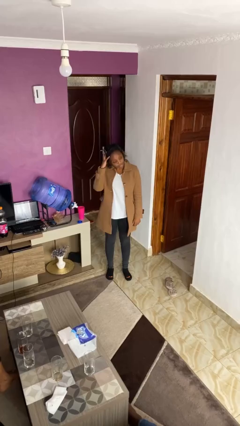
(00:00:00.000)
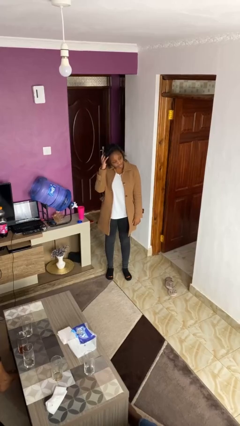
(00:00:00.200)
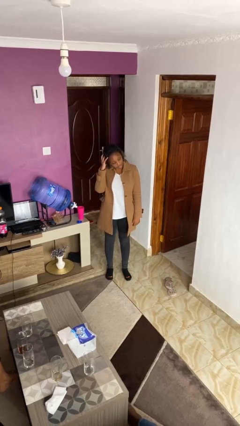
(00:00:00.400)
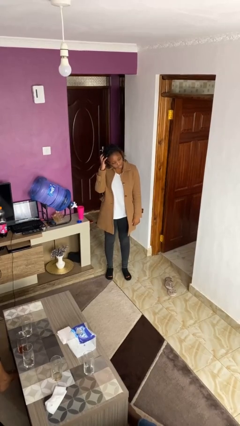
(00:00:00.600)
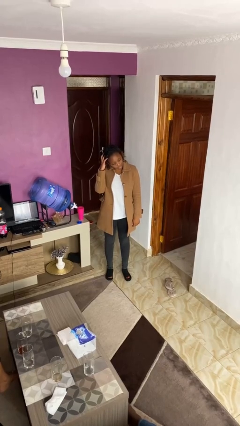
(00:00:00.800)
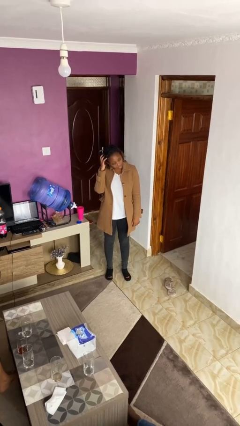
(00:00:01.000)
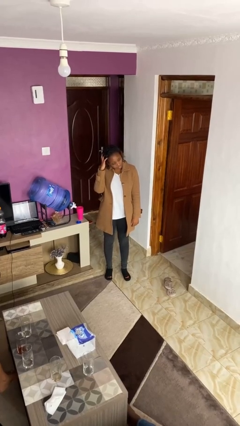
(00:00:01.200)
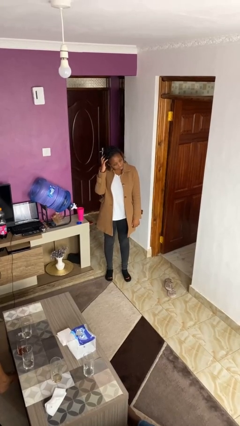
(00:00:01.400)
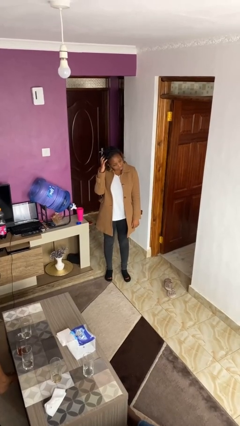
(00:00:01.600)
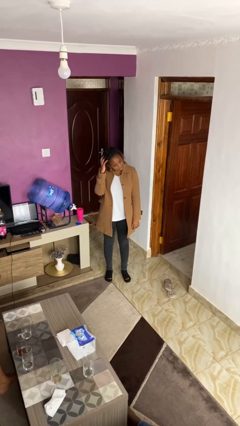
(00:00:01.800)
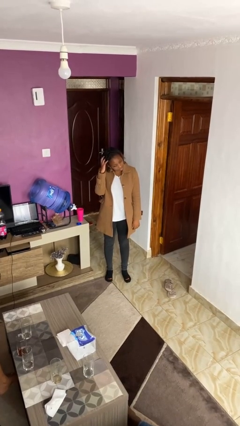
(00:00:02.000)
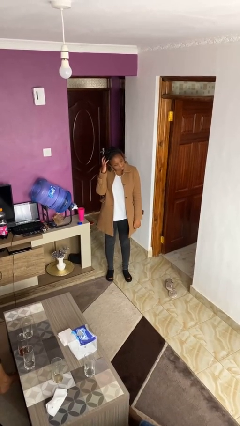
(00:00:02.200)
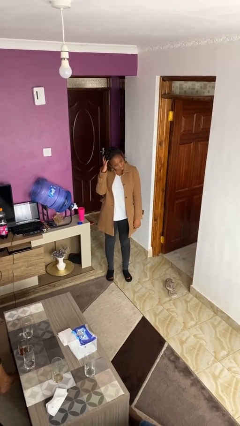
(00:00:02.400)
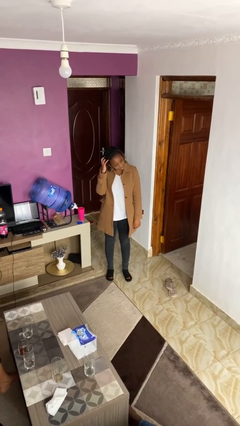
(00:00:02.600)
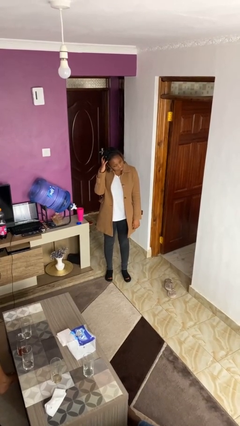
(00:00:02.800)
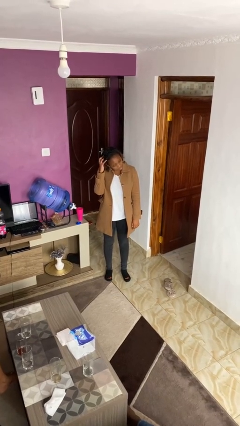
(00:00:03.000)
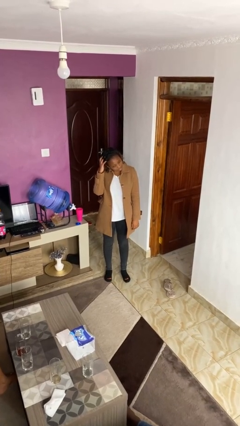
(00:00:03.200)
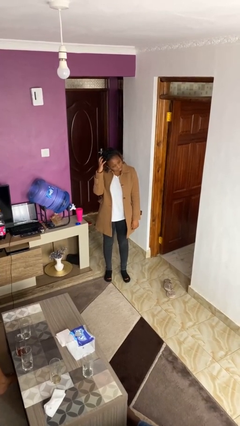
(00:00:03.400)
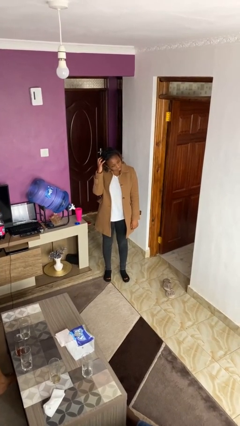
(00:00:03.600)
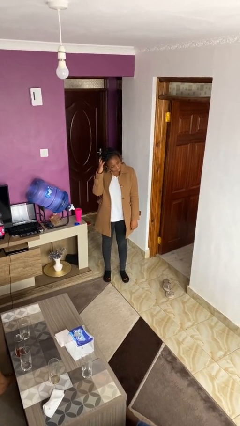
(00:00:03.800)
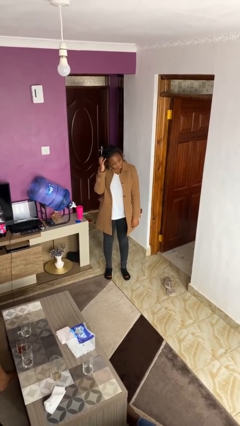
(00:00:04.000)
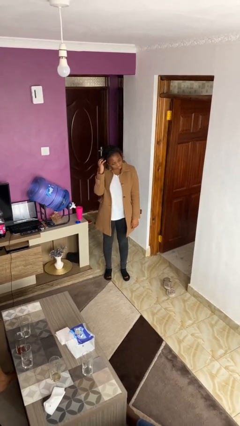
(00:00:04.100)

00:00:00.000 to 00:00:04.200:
person scratches face

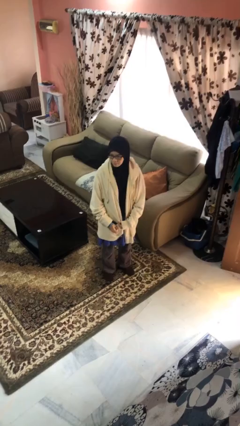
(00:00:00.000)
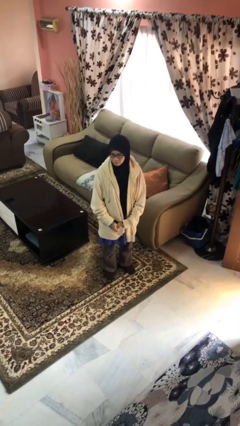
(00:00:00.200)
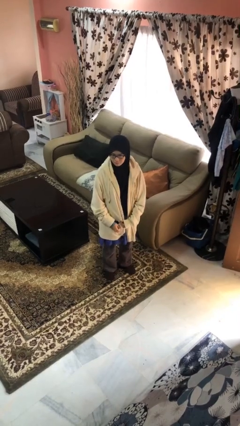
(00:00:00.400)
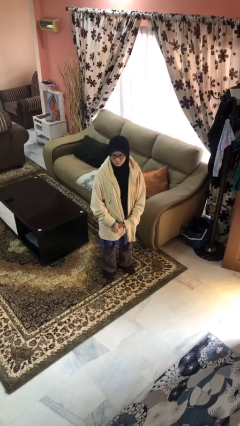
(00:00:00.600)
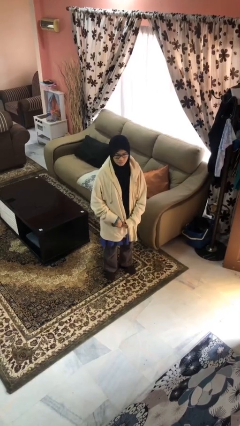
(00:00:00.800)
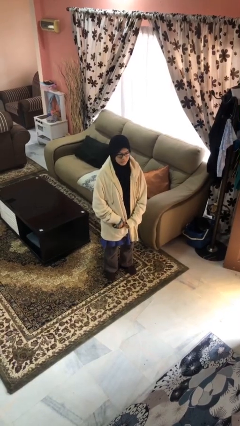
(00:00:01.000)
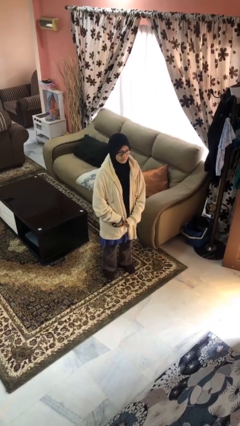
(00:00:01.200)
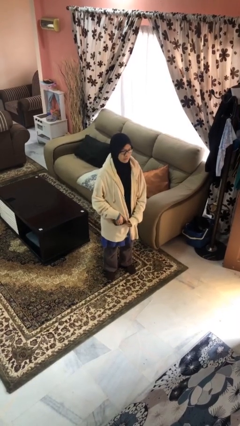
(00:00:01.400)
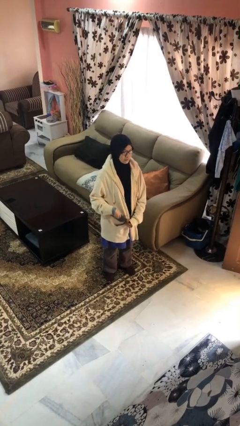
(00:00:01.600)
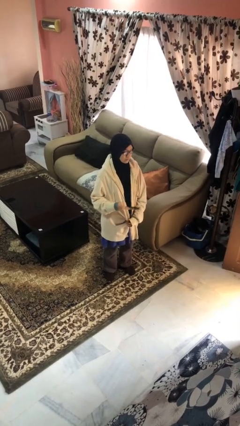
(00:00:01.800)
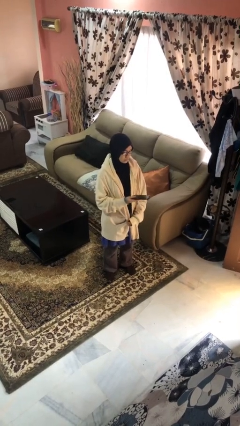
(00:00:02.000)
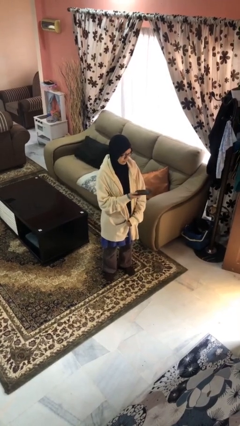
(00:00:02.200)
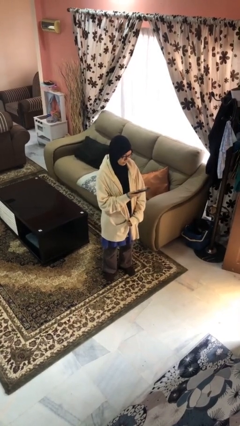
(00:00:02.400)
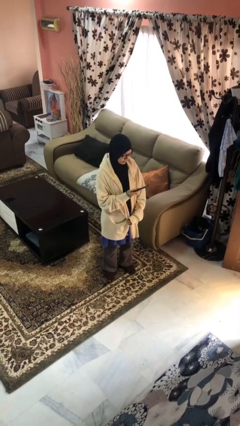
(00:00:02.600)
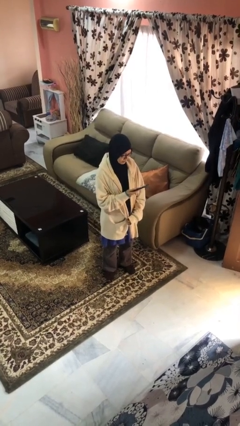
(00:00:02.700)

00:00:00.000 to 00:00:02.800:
person takes phone from pocket

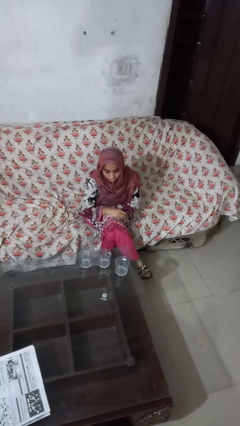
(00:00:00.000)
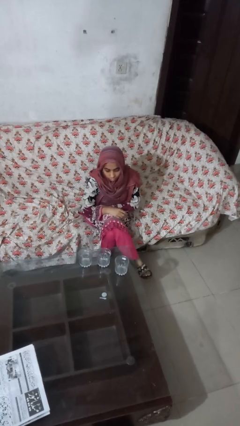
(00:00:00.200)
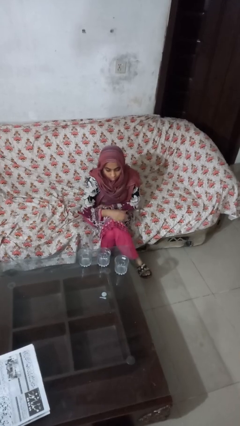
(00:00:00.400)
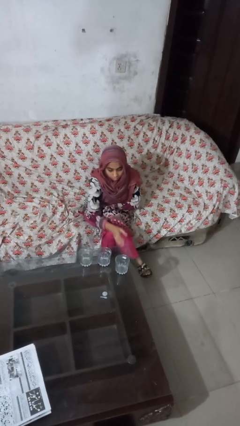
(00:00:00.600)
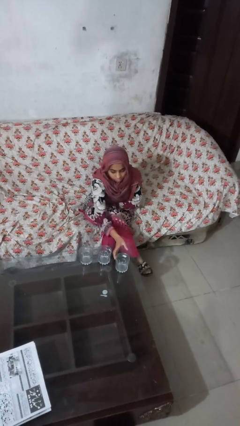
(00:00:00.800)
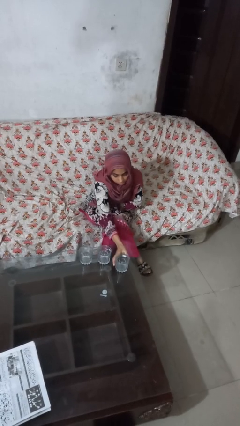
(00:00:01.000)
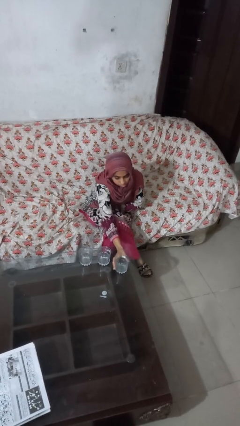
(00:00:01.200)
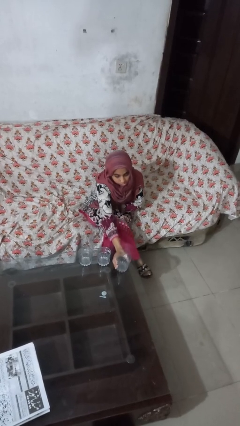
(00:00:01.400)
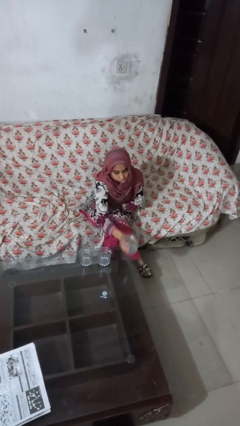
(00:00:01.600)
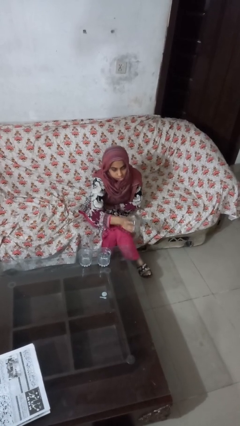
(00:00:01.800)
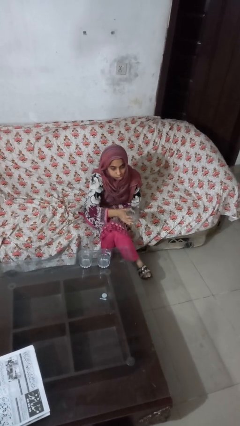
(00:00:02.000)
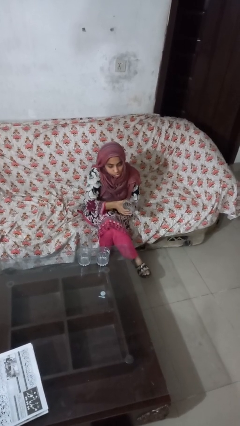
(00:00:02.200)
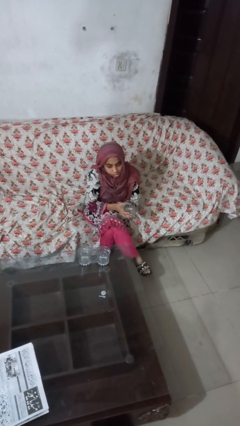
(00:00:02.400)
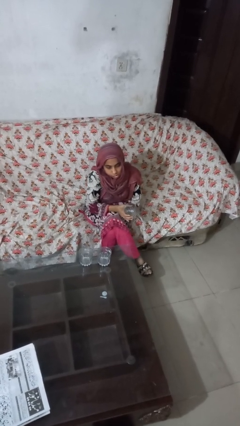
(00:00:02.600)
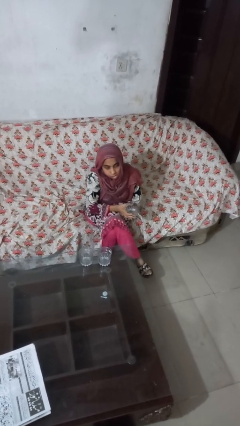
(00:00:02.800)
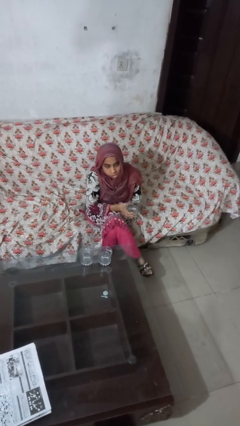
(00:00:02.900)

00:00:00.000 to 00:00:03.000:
person picks up object from table

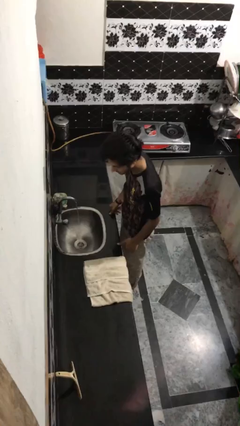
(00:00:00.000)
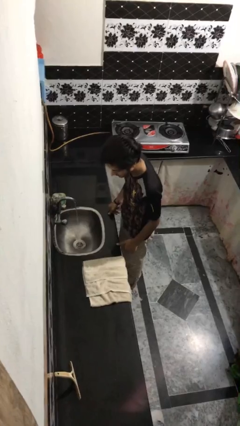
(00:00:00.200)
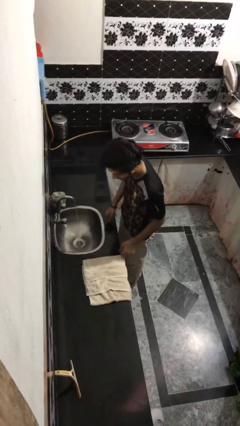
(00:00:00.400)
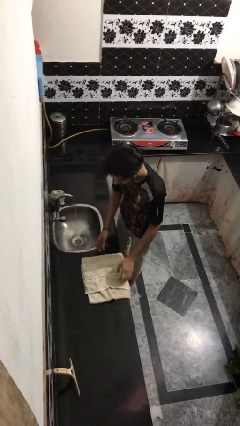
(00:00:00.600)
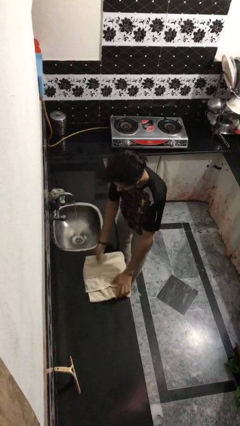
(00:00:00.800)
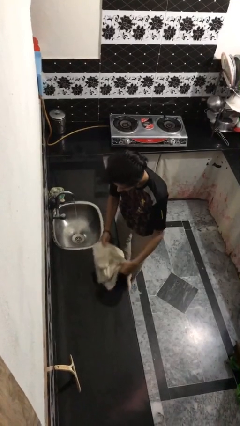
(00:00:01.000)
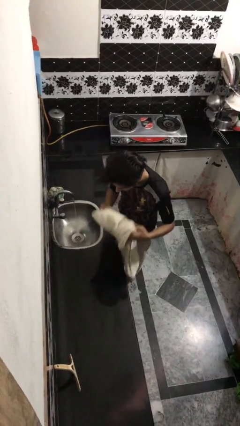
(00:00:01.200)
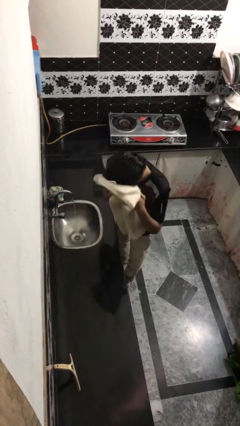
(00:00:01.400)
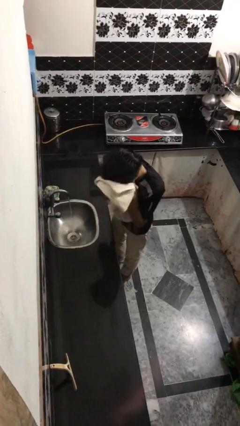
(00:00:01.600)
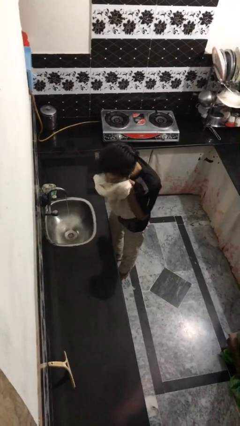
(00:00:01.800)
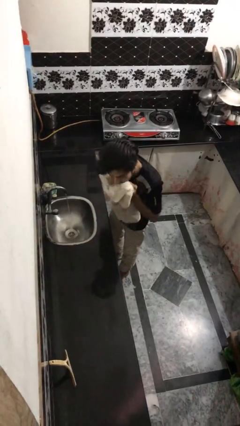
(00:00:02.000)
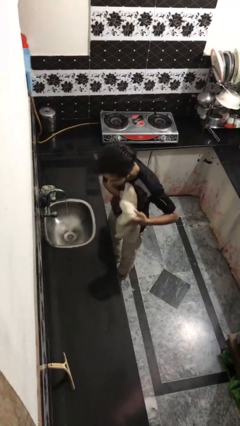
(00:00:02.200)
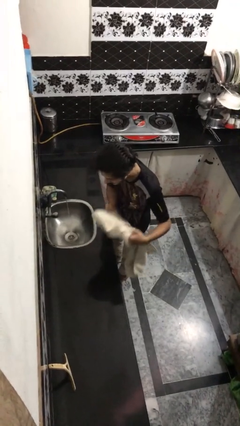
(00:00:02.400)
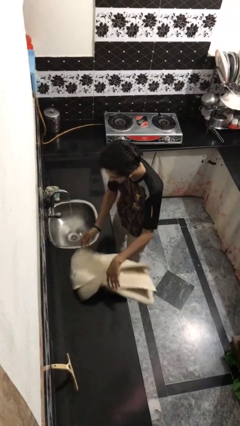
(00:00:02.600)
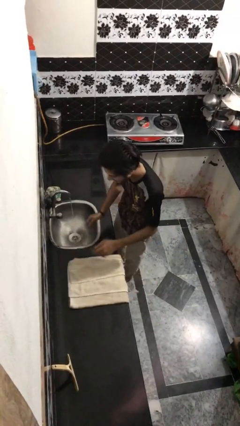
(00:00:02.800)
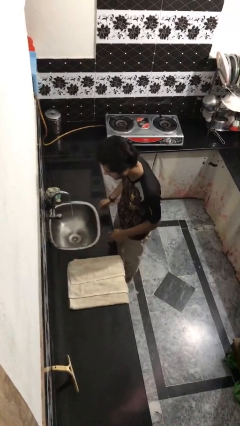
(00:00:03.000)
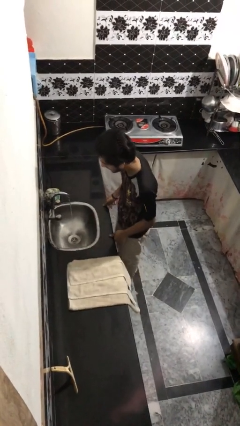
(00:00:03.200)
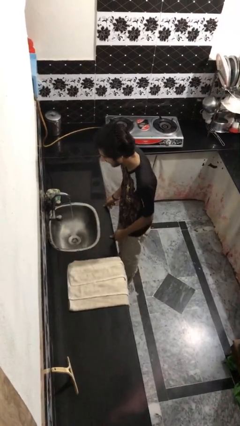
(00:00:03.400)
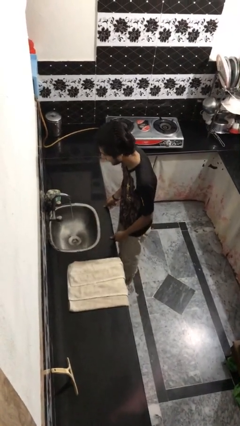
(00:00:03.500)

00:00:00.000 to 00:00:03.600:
person dries face with towel

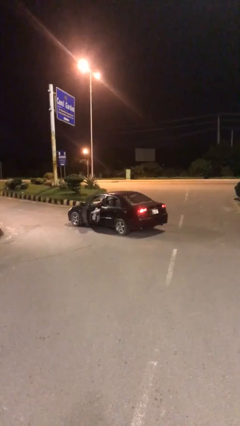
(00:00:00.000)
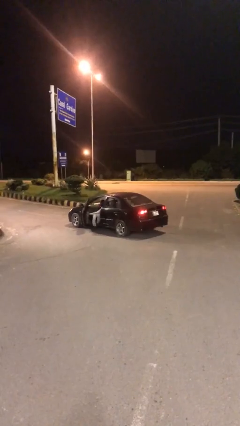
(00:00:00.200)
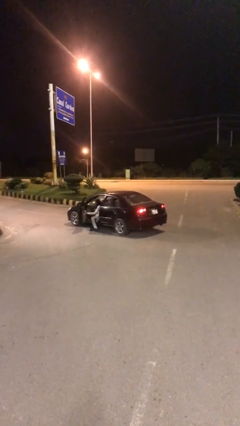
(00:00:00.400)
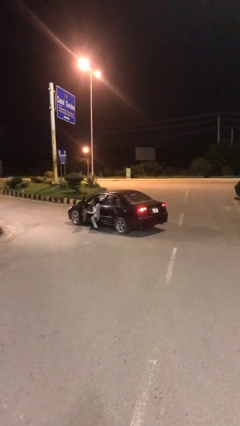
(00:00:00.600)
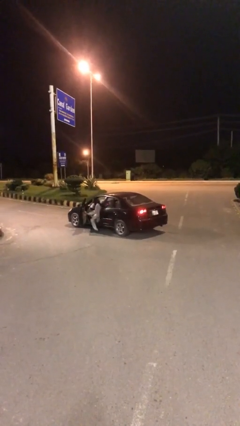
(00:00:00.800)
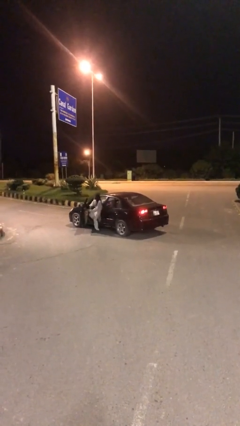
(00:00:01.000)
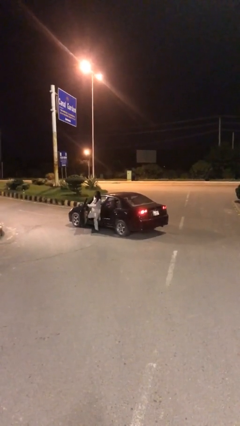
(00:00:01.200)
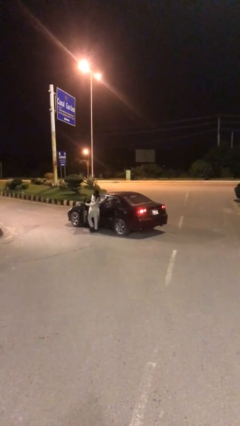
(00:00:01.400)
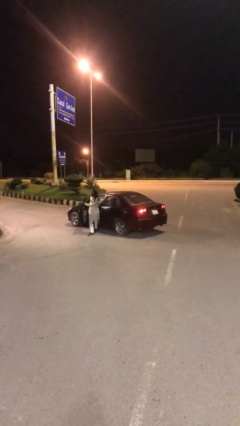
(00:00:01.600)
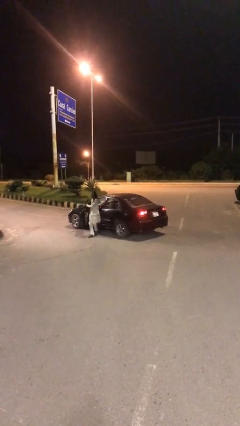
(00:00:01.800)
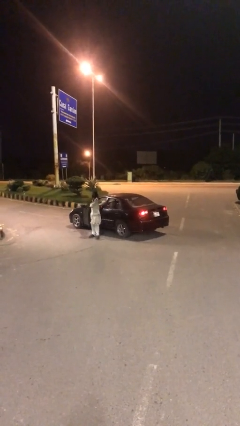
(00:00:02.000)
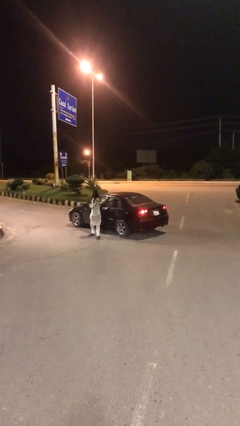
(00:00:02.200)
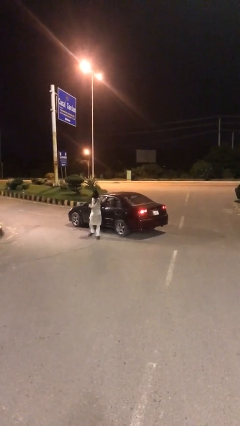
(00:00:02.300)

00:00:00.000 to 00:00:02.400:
car drops off person

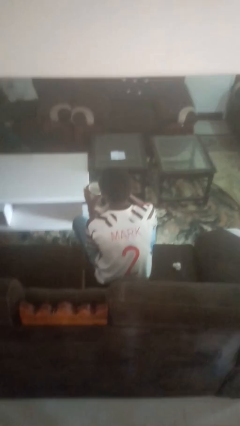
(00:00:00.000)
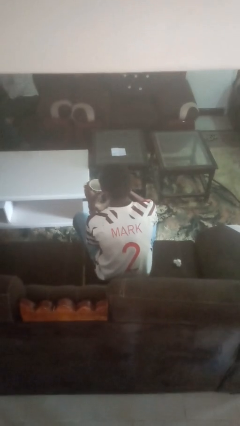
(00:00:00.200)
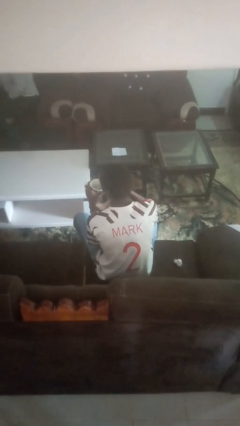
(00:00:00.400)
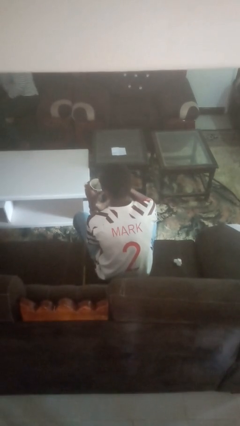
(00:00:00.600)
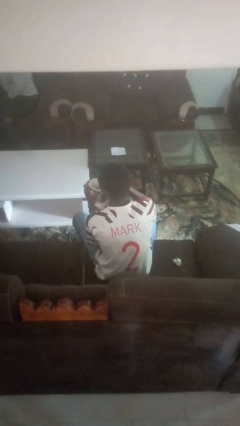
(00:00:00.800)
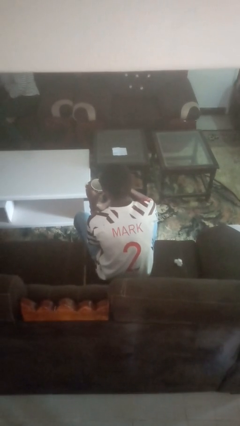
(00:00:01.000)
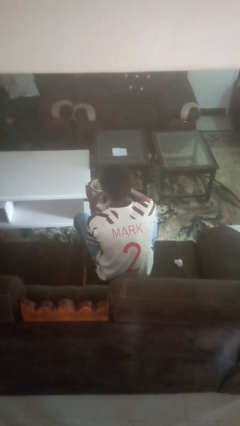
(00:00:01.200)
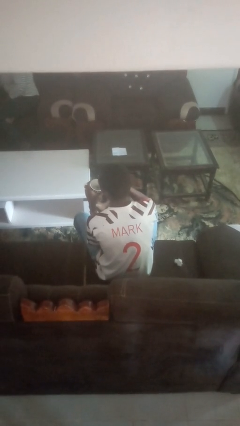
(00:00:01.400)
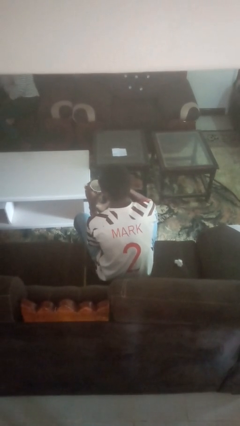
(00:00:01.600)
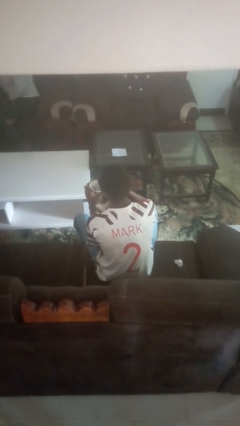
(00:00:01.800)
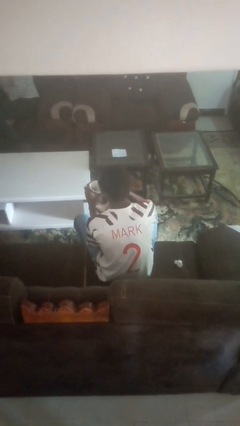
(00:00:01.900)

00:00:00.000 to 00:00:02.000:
person stirs mug
